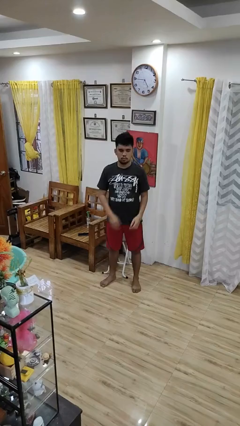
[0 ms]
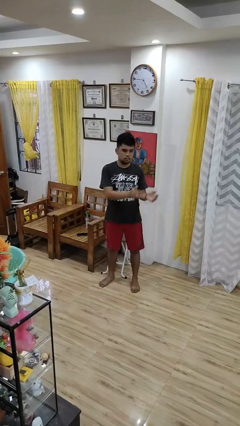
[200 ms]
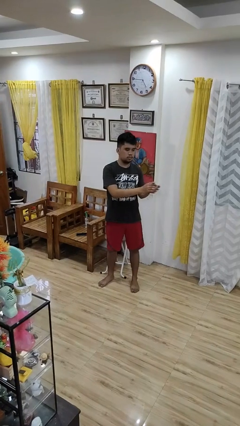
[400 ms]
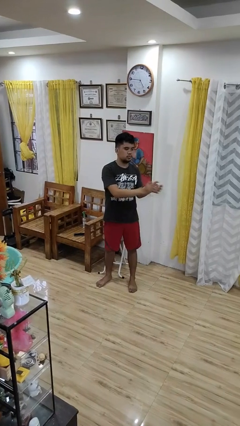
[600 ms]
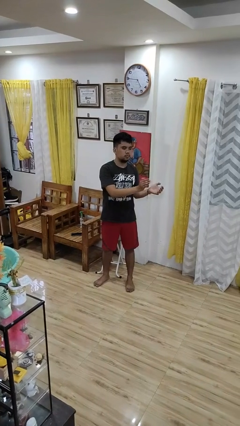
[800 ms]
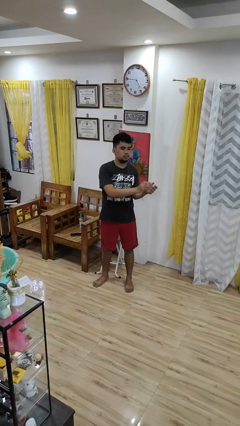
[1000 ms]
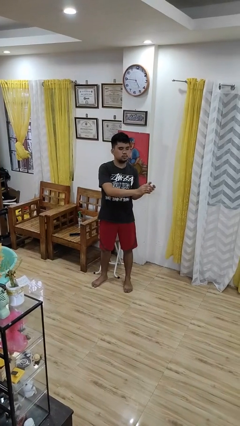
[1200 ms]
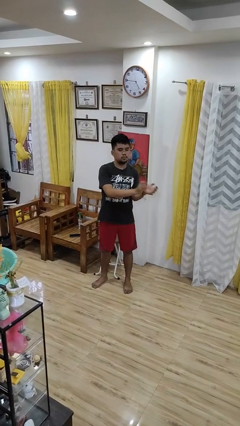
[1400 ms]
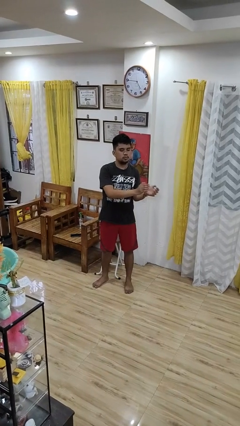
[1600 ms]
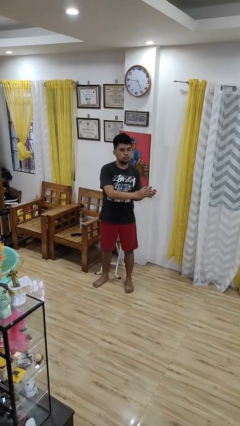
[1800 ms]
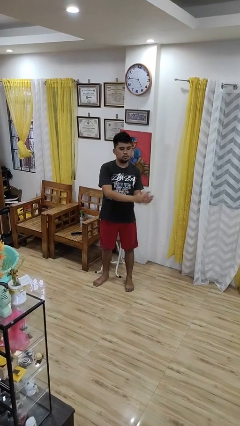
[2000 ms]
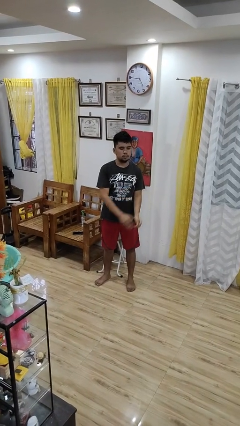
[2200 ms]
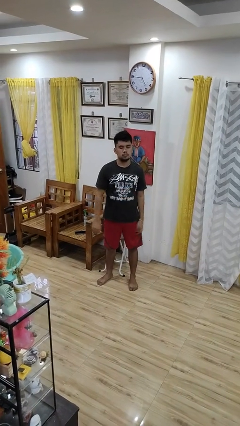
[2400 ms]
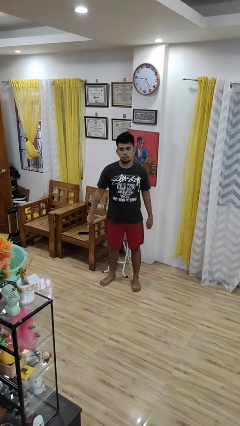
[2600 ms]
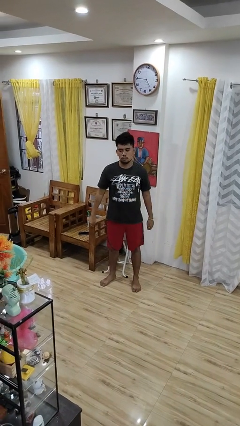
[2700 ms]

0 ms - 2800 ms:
person claps hands

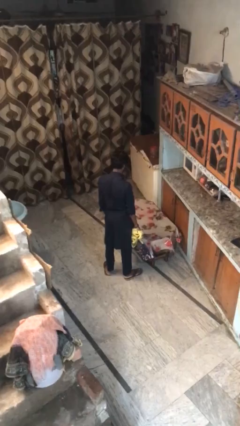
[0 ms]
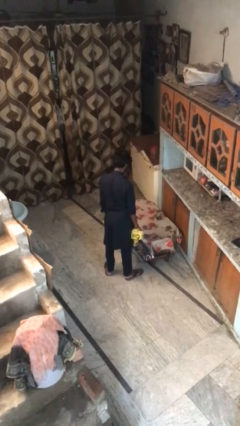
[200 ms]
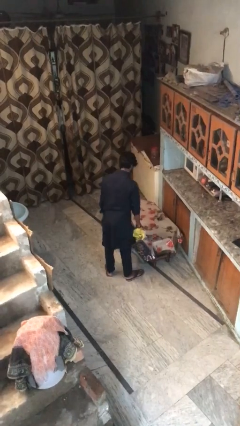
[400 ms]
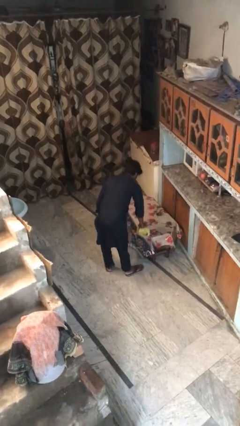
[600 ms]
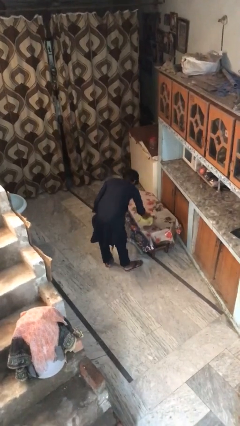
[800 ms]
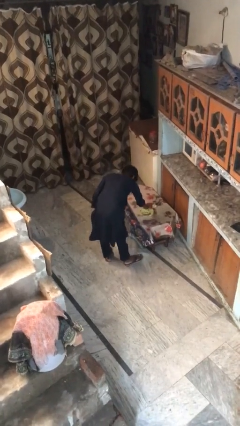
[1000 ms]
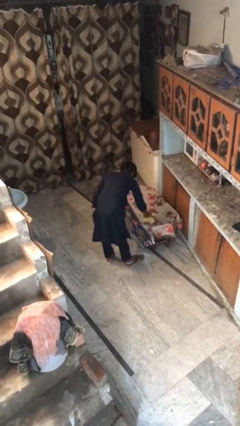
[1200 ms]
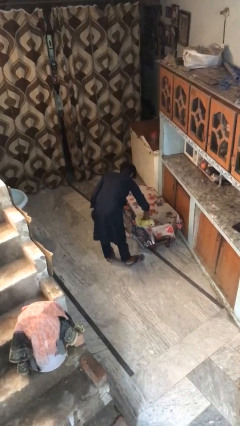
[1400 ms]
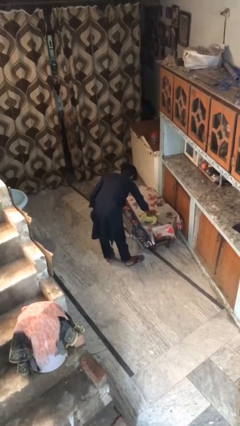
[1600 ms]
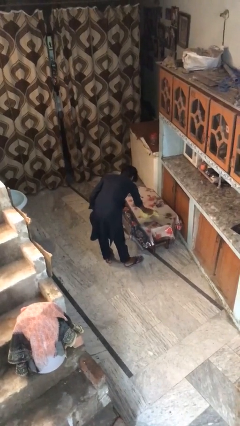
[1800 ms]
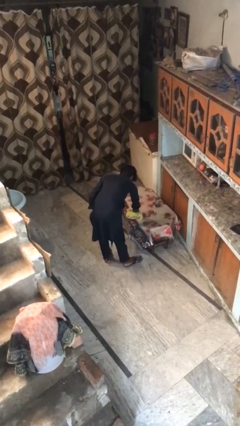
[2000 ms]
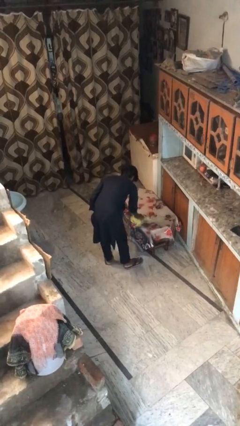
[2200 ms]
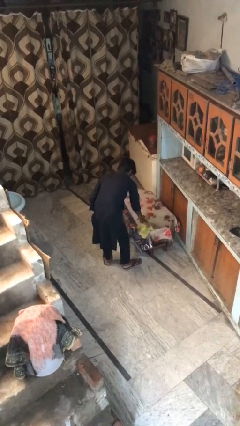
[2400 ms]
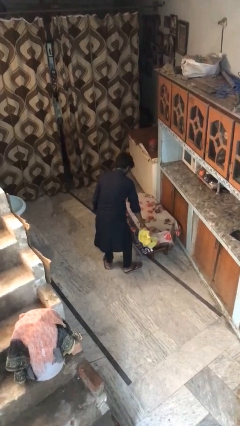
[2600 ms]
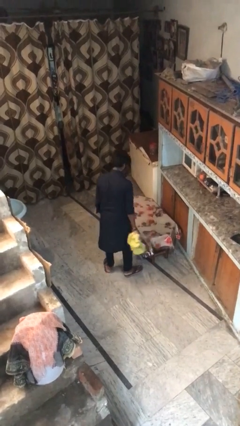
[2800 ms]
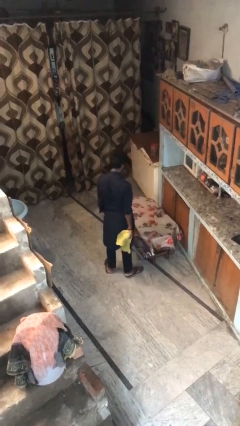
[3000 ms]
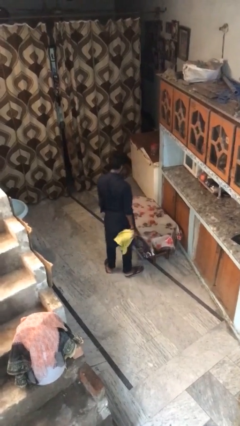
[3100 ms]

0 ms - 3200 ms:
person cleans table with rag

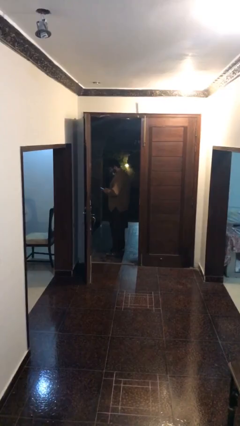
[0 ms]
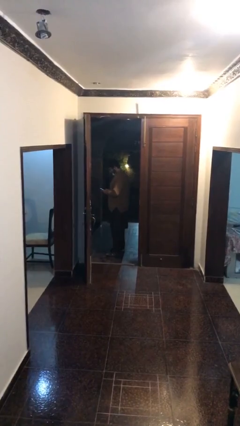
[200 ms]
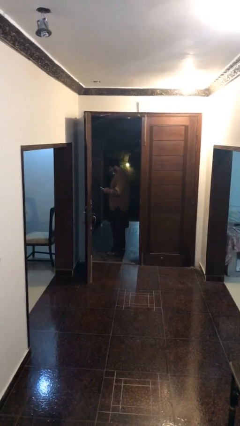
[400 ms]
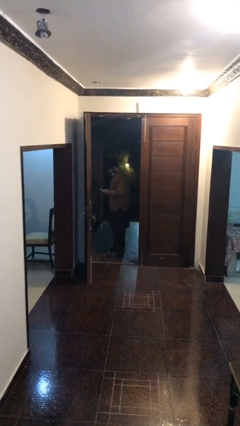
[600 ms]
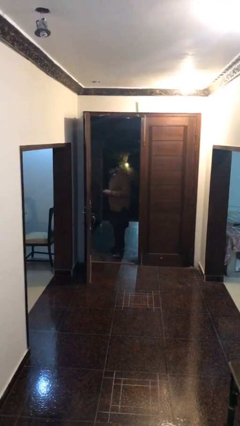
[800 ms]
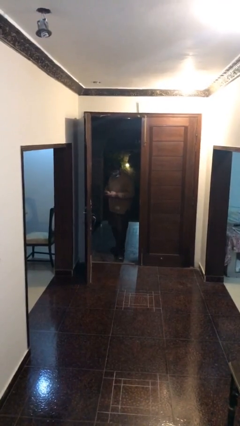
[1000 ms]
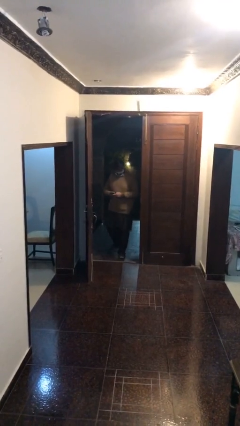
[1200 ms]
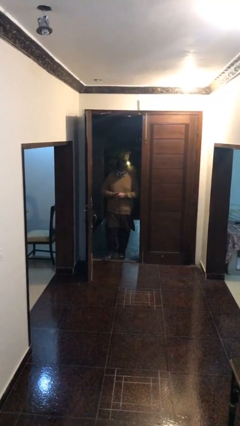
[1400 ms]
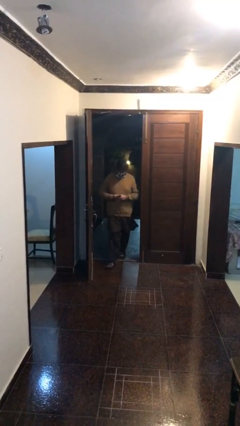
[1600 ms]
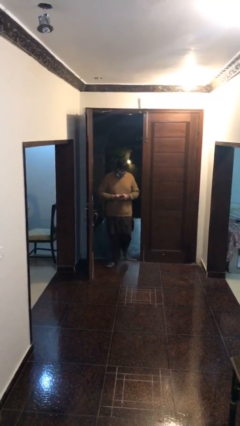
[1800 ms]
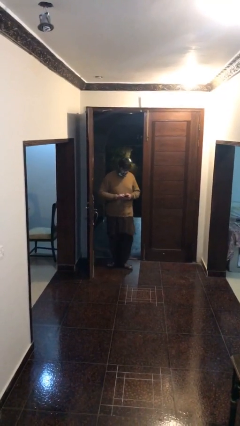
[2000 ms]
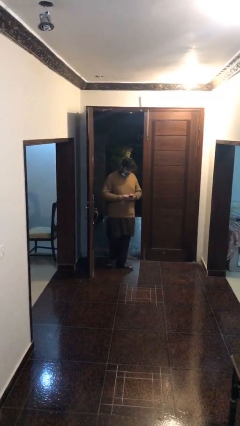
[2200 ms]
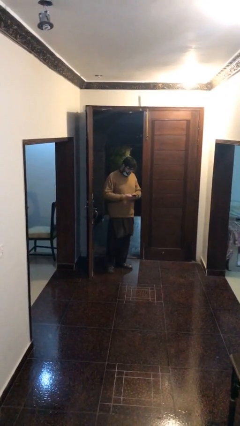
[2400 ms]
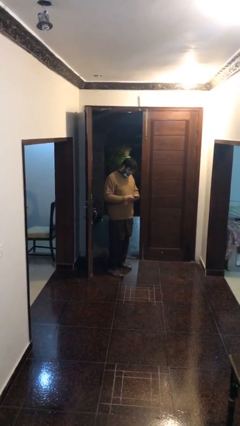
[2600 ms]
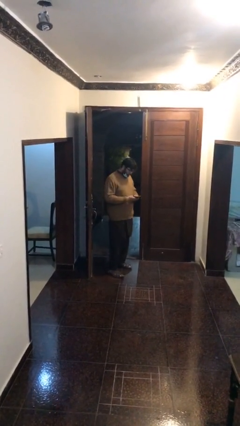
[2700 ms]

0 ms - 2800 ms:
person enters scene through structure

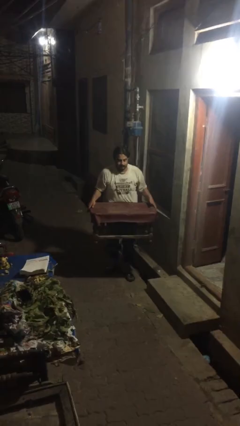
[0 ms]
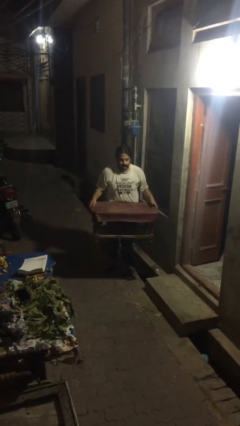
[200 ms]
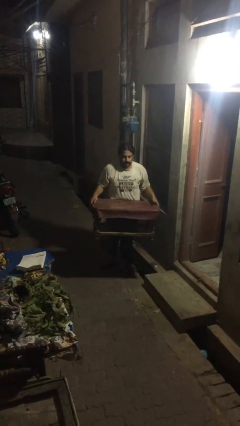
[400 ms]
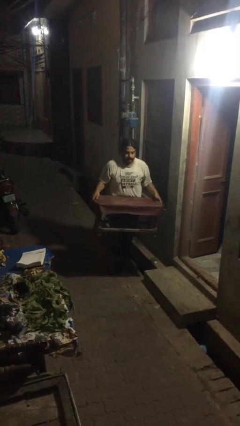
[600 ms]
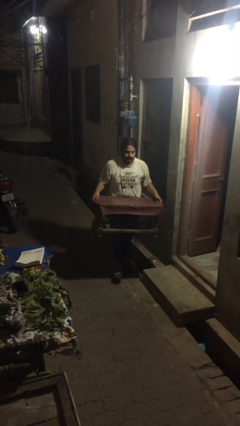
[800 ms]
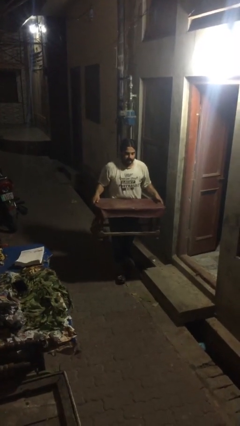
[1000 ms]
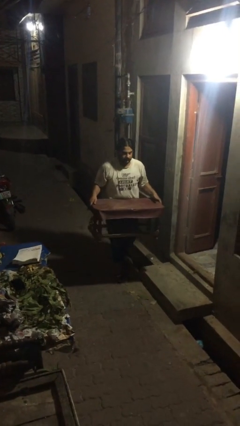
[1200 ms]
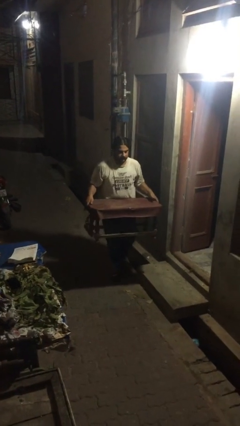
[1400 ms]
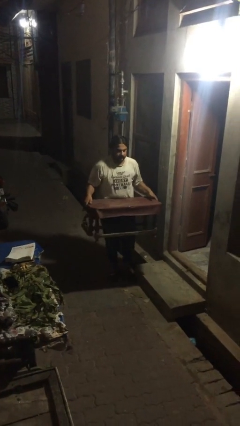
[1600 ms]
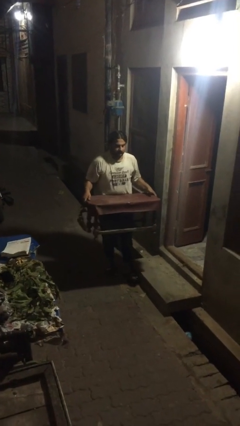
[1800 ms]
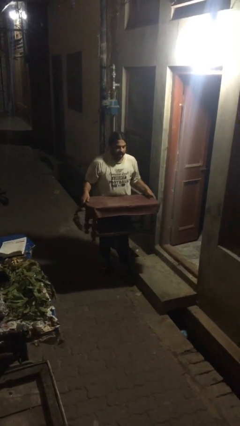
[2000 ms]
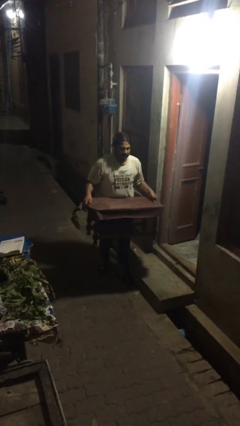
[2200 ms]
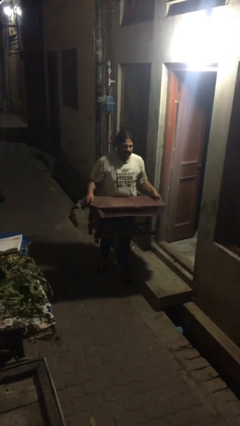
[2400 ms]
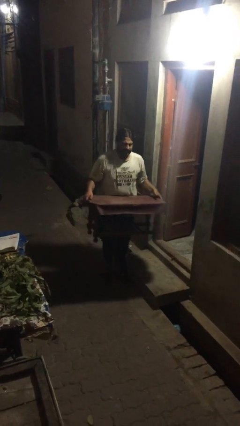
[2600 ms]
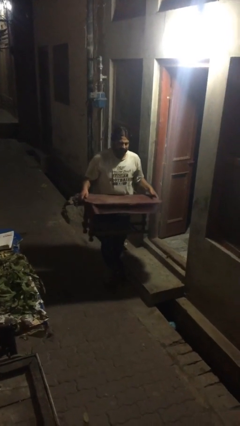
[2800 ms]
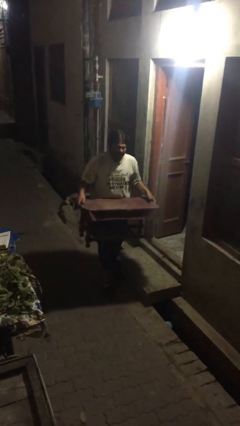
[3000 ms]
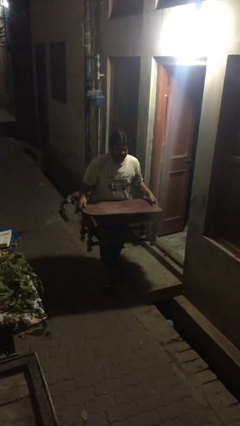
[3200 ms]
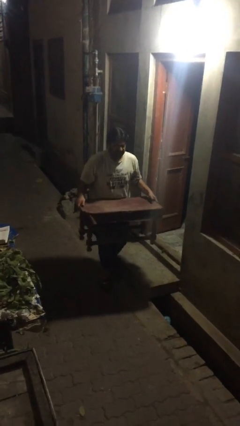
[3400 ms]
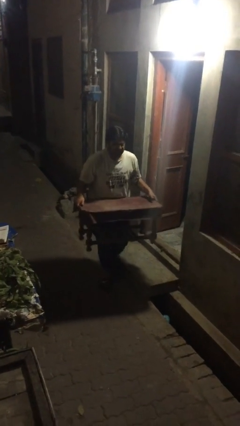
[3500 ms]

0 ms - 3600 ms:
person carries heavy object

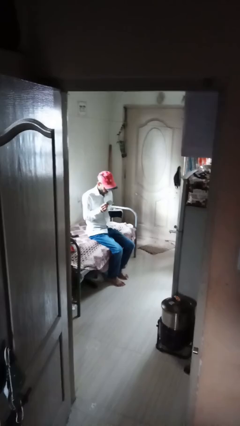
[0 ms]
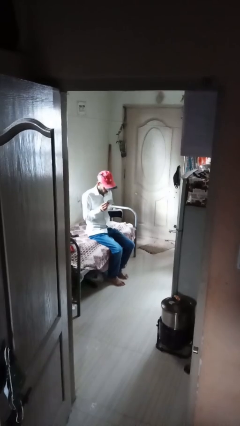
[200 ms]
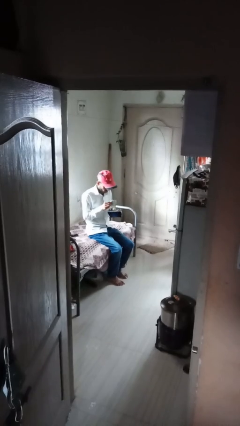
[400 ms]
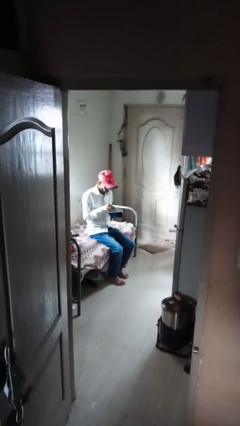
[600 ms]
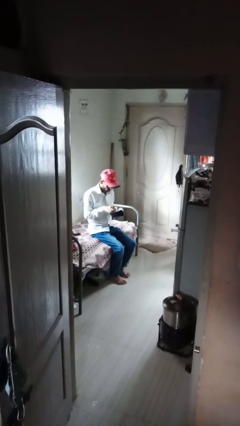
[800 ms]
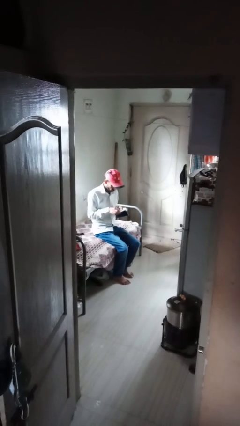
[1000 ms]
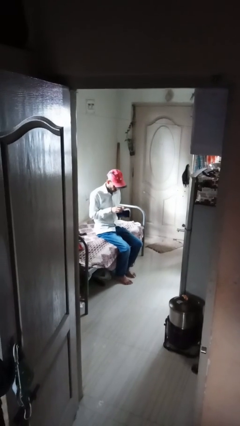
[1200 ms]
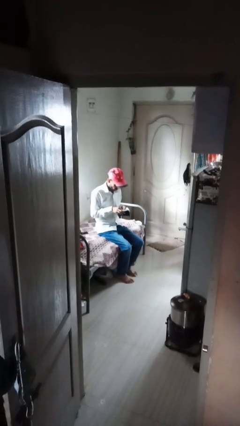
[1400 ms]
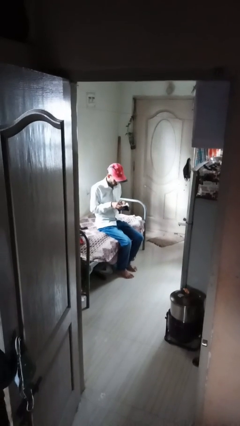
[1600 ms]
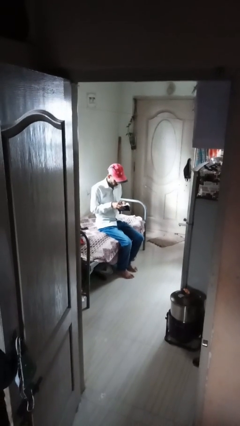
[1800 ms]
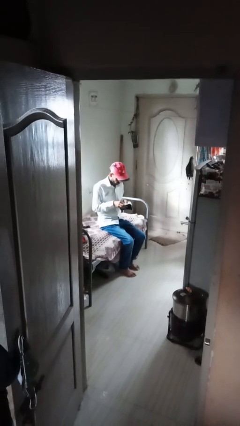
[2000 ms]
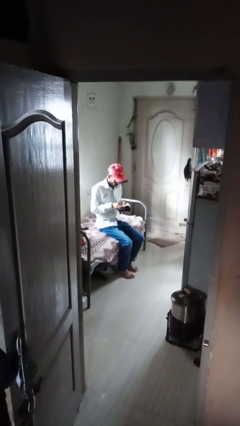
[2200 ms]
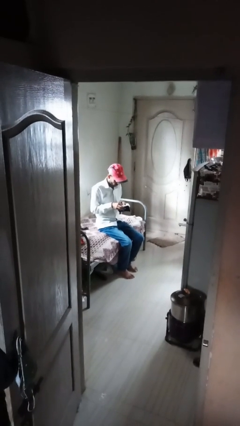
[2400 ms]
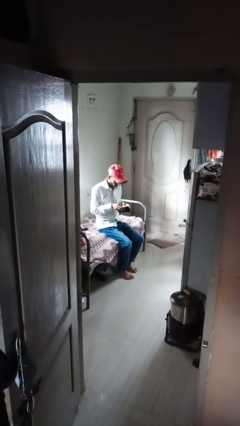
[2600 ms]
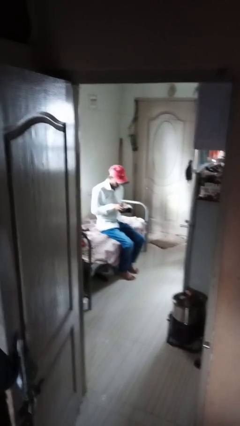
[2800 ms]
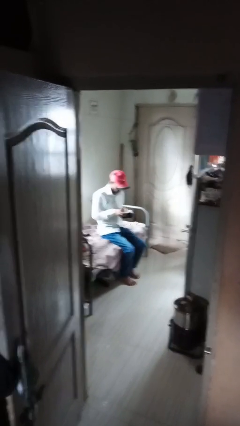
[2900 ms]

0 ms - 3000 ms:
person puts object into purse

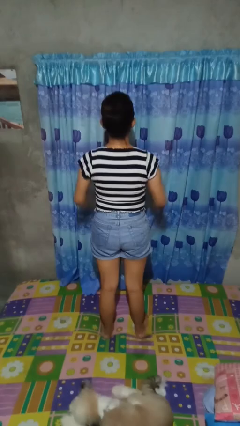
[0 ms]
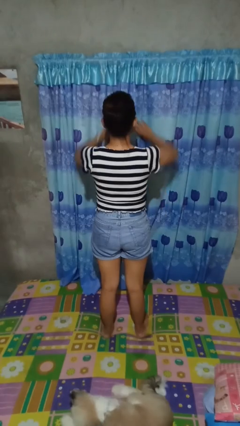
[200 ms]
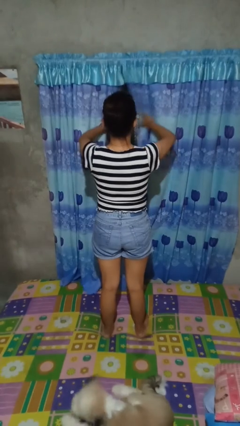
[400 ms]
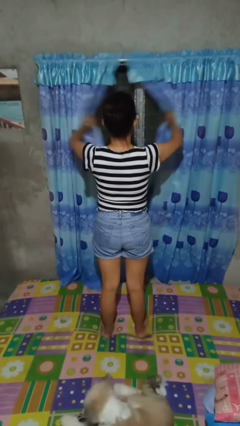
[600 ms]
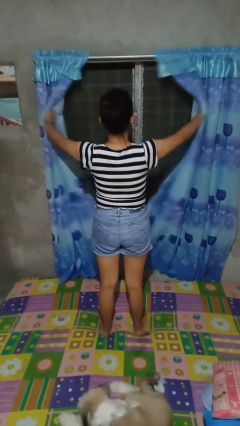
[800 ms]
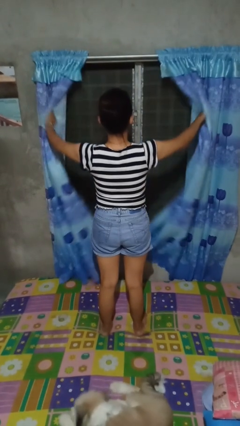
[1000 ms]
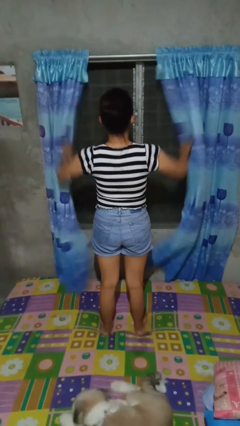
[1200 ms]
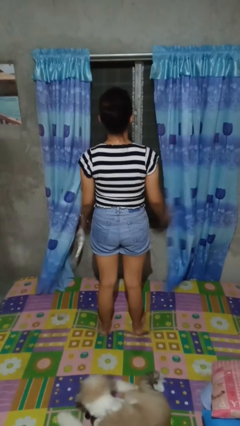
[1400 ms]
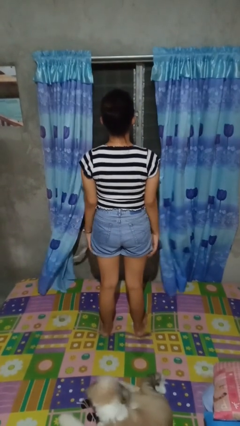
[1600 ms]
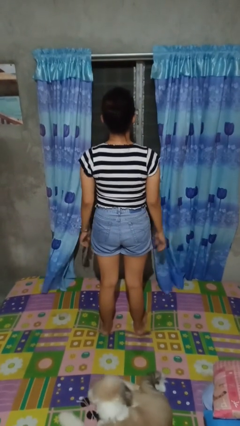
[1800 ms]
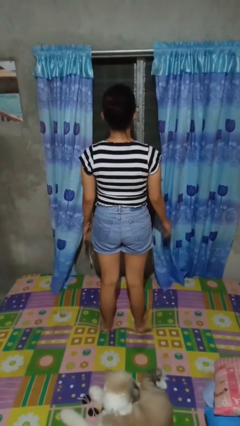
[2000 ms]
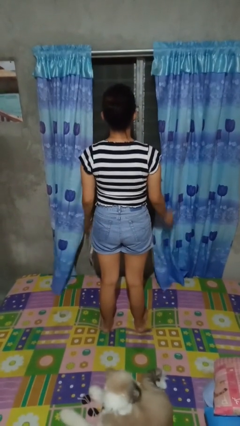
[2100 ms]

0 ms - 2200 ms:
person opens curtains

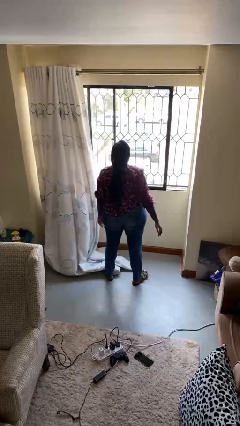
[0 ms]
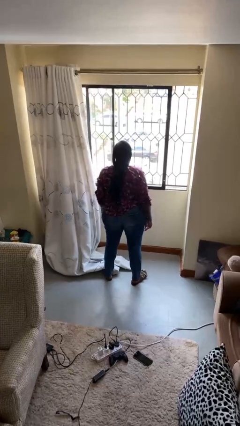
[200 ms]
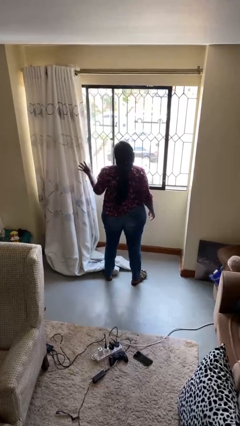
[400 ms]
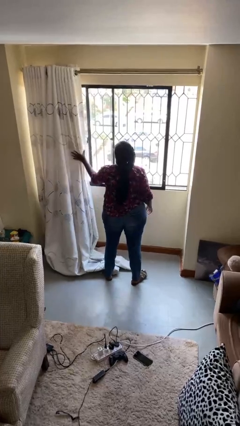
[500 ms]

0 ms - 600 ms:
person closes curtains
